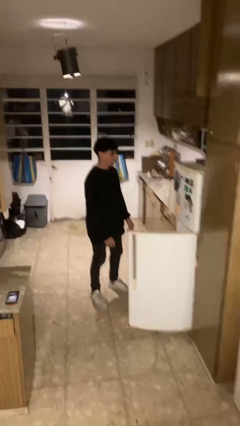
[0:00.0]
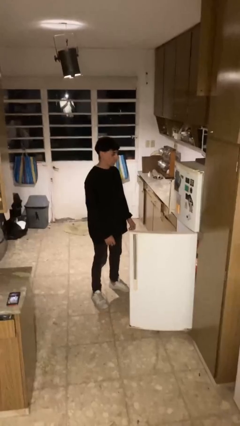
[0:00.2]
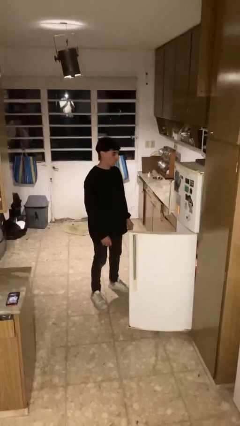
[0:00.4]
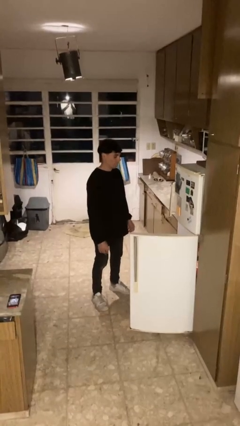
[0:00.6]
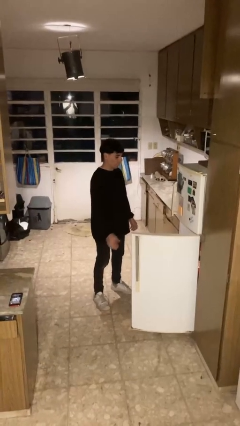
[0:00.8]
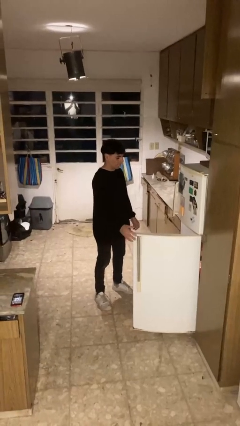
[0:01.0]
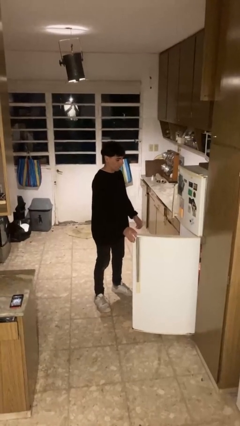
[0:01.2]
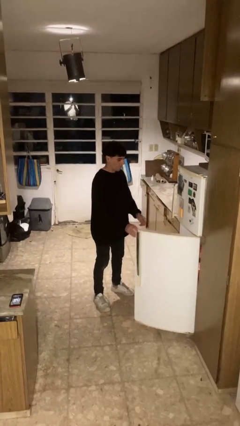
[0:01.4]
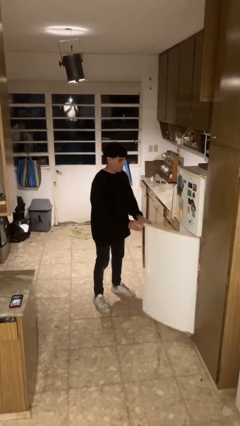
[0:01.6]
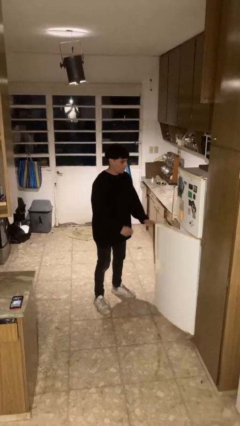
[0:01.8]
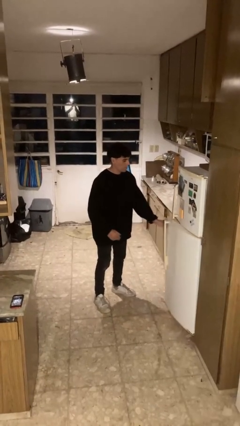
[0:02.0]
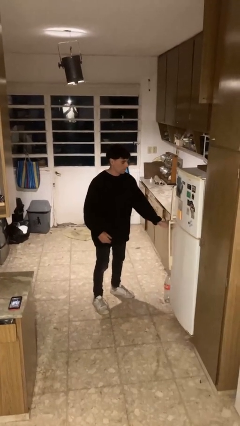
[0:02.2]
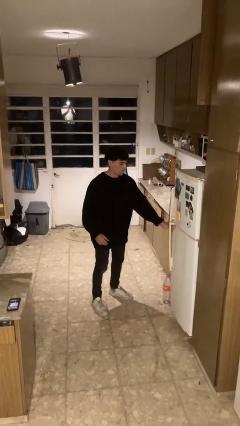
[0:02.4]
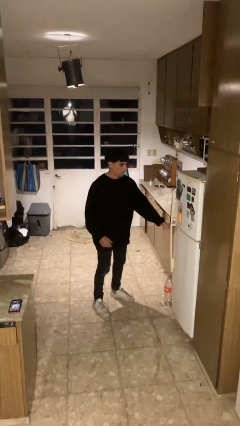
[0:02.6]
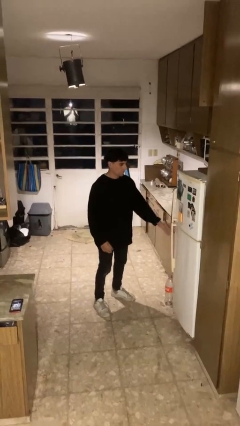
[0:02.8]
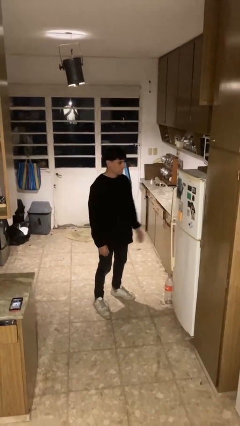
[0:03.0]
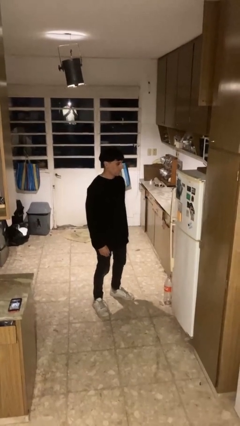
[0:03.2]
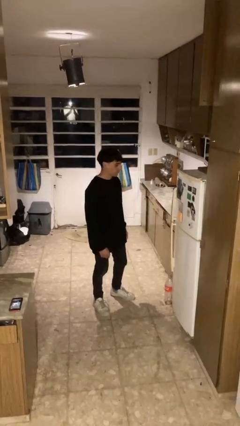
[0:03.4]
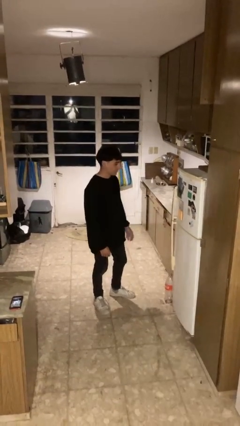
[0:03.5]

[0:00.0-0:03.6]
person closes refrigerator

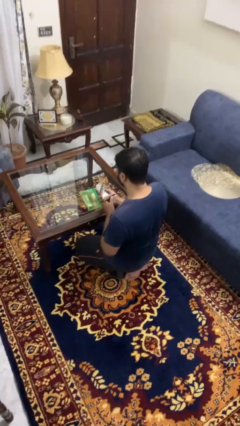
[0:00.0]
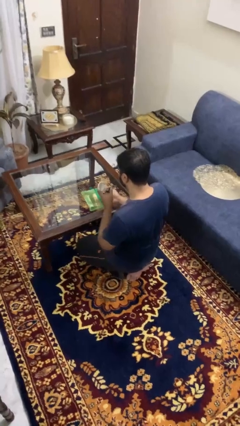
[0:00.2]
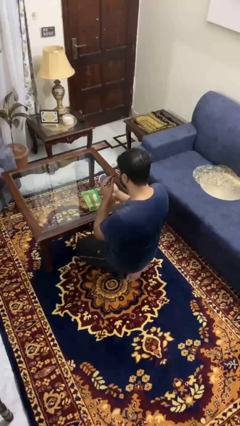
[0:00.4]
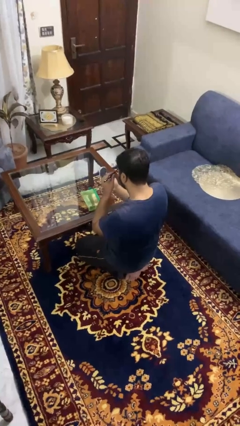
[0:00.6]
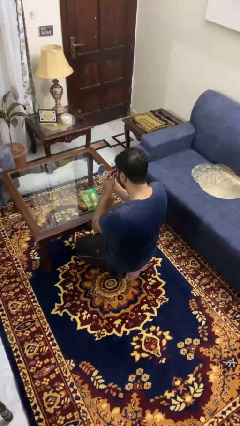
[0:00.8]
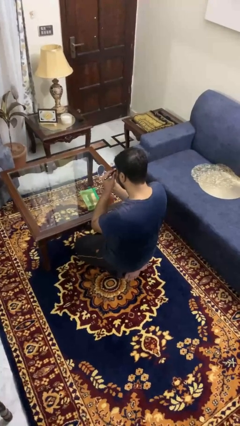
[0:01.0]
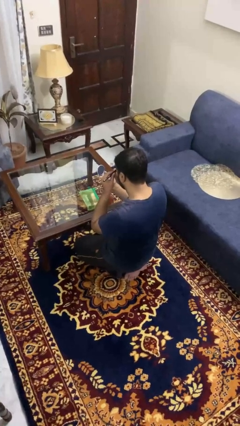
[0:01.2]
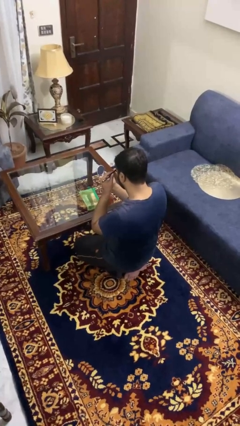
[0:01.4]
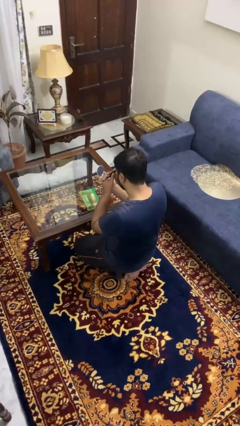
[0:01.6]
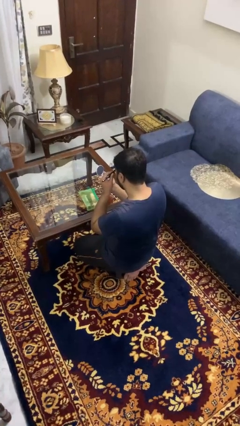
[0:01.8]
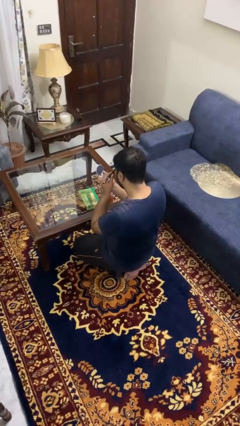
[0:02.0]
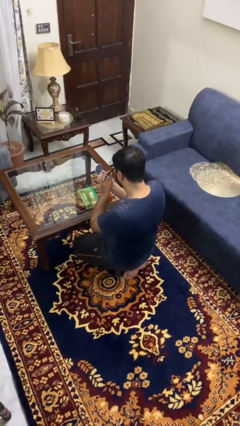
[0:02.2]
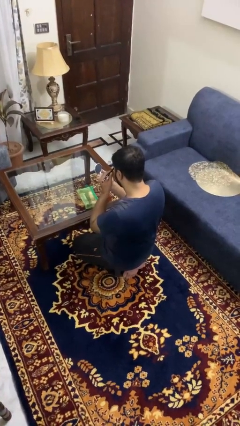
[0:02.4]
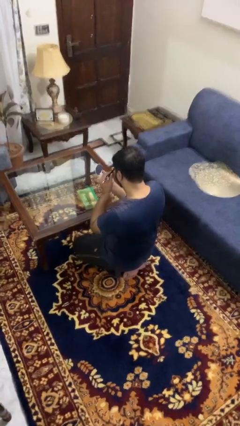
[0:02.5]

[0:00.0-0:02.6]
person applies eye makeup

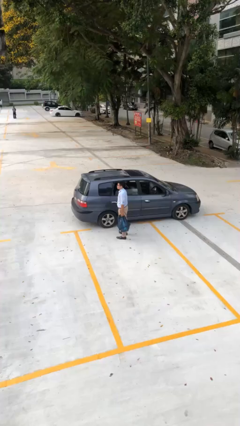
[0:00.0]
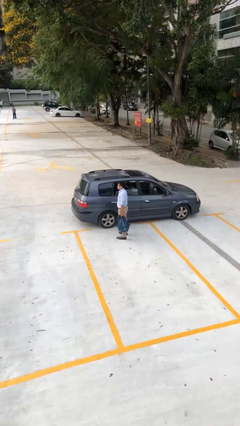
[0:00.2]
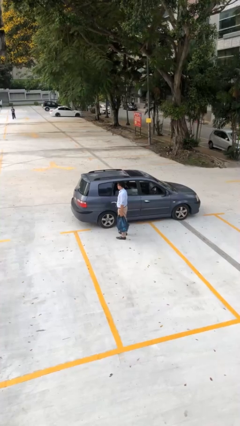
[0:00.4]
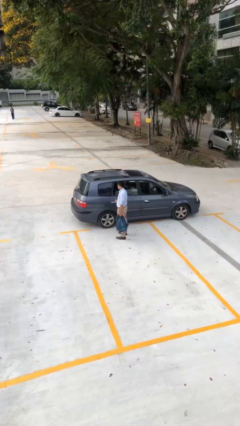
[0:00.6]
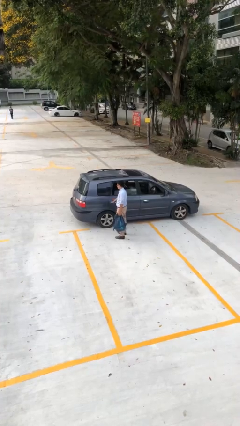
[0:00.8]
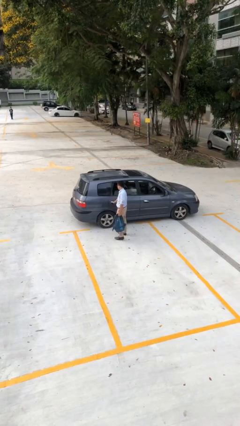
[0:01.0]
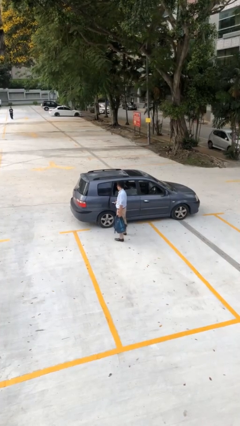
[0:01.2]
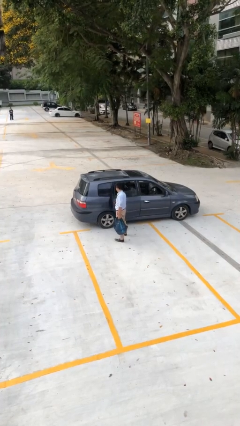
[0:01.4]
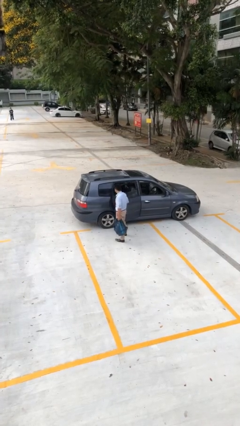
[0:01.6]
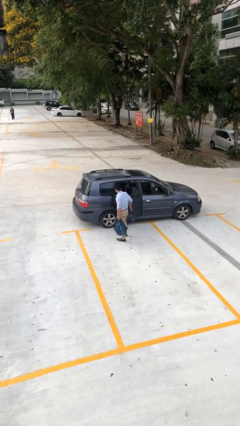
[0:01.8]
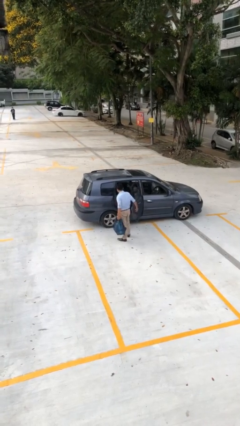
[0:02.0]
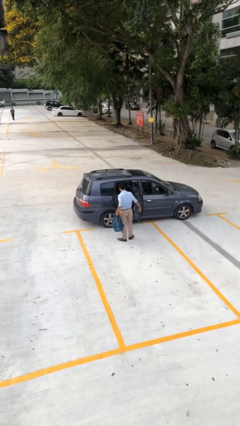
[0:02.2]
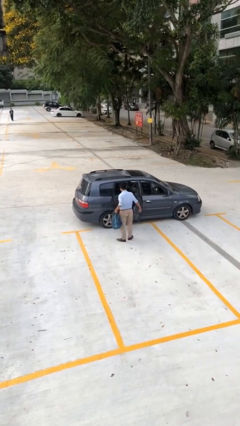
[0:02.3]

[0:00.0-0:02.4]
person opens car door

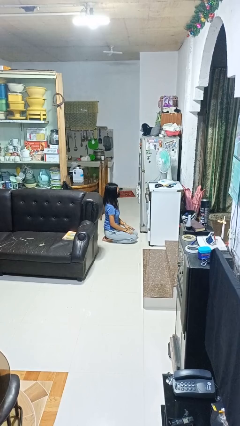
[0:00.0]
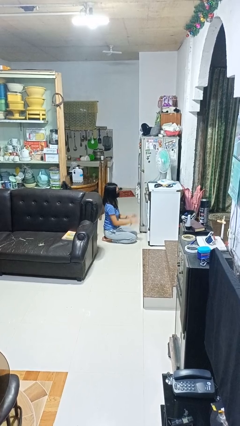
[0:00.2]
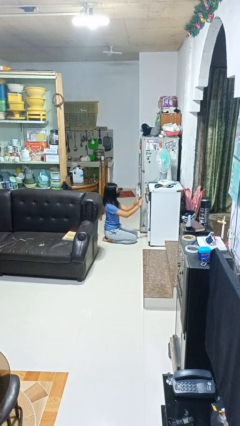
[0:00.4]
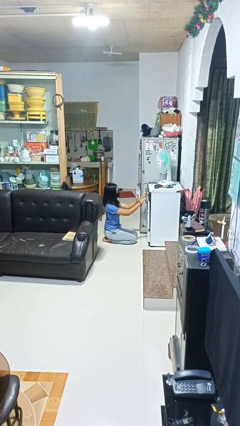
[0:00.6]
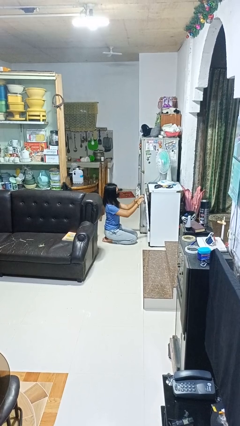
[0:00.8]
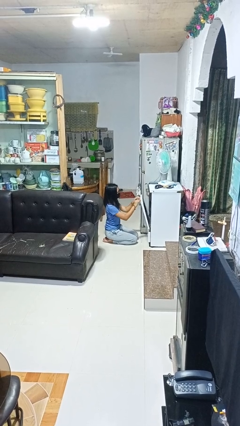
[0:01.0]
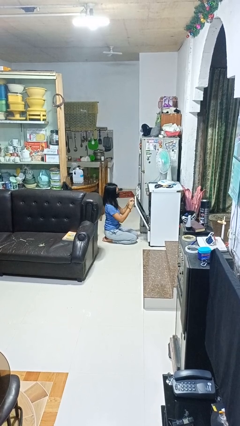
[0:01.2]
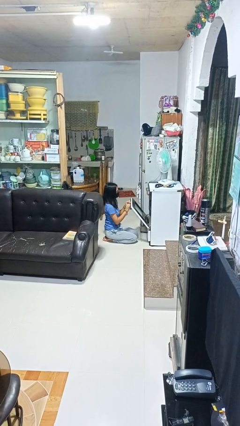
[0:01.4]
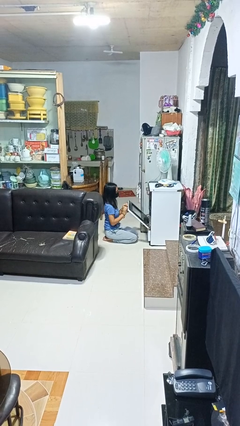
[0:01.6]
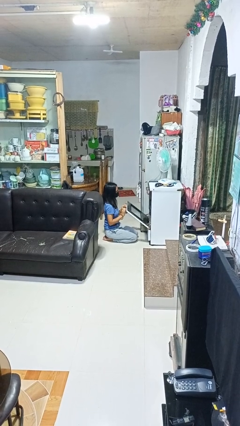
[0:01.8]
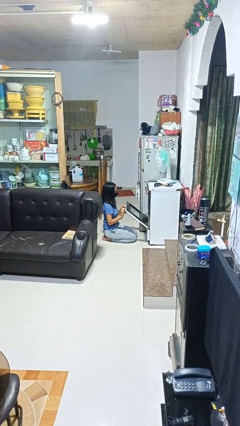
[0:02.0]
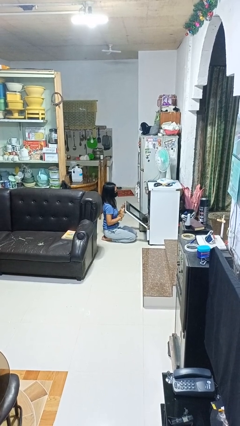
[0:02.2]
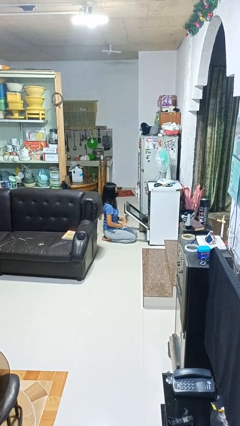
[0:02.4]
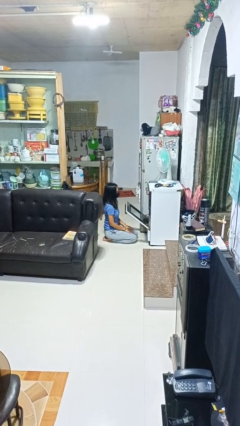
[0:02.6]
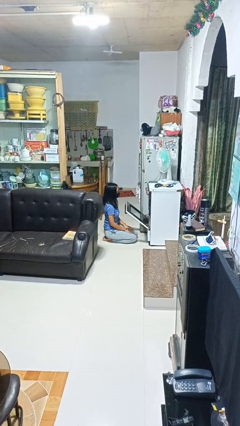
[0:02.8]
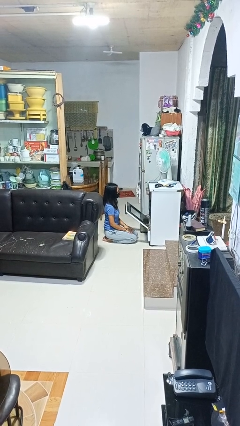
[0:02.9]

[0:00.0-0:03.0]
person opens oven door

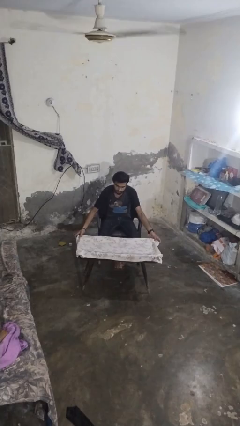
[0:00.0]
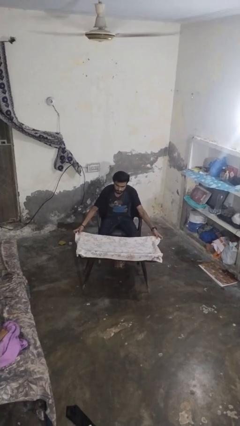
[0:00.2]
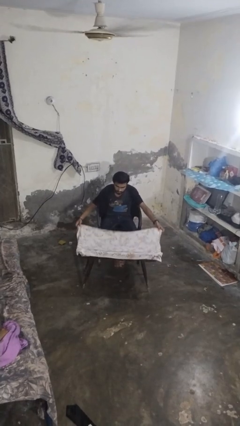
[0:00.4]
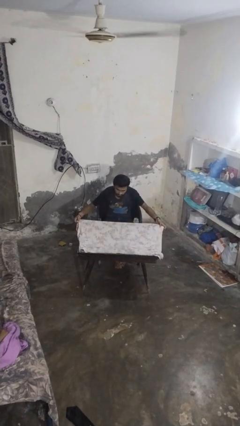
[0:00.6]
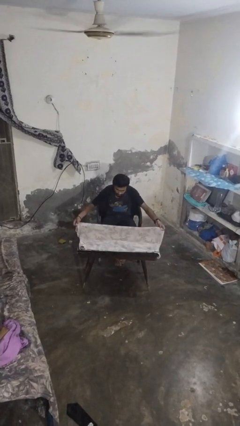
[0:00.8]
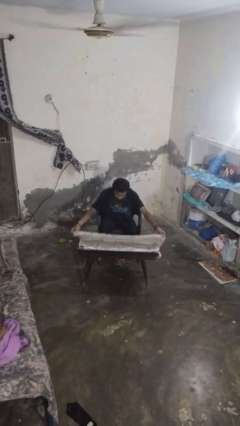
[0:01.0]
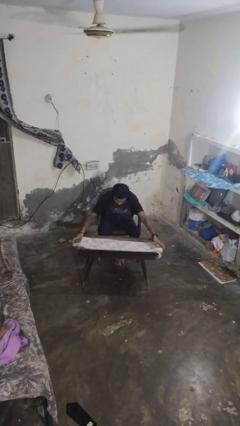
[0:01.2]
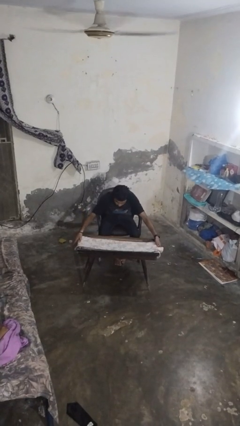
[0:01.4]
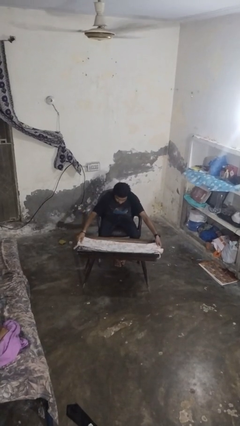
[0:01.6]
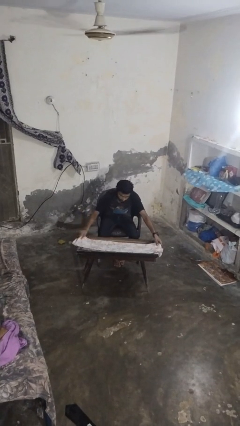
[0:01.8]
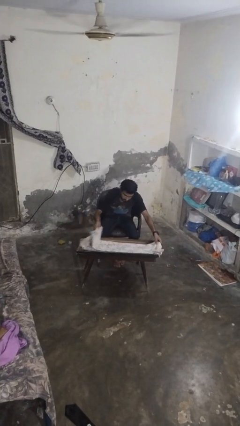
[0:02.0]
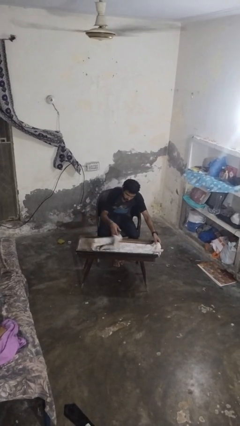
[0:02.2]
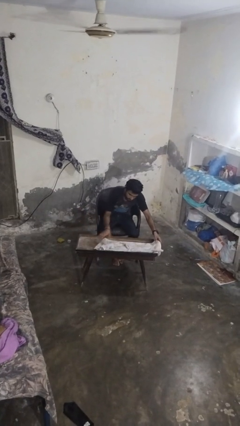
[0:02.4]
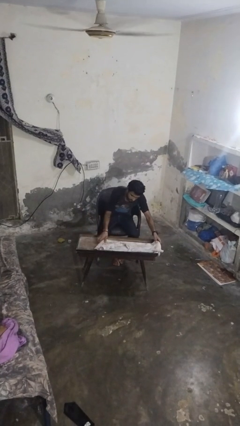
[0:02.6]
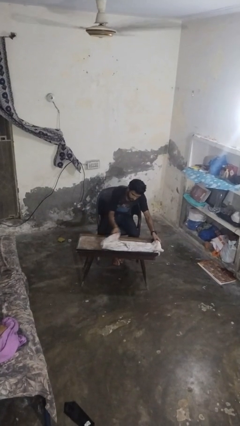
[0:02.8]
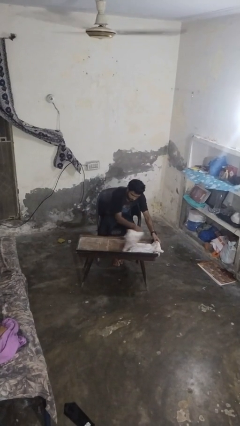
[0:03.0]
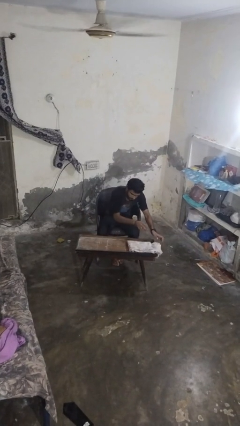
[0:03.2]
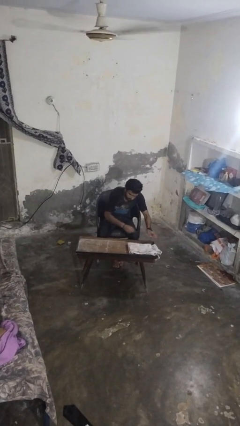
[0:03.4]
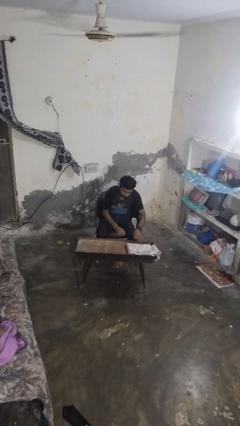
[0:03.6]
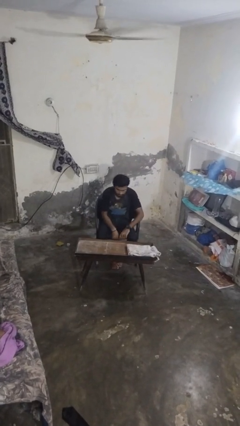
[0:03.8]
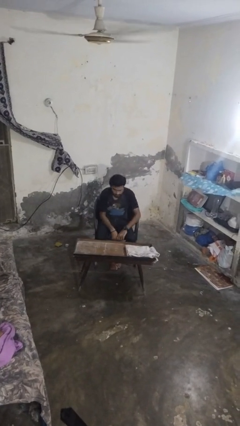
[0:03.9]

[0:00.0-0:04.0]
person folds tablecloth

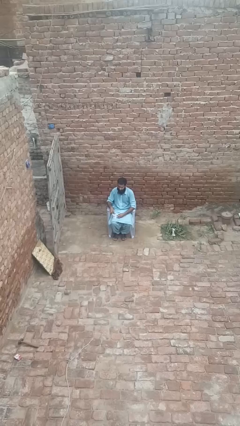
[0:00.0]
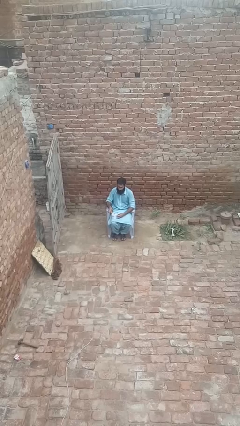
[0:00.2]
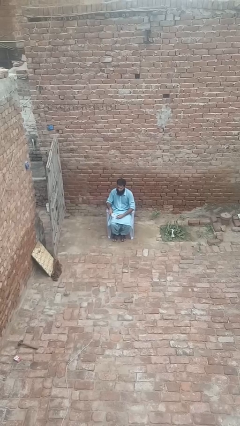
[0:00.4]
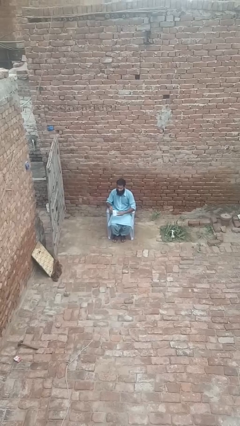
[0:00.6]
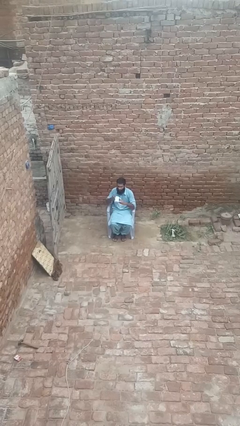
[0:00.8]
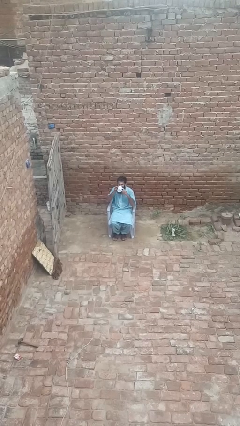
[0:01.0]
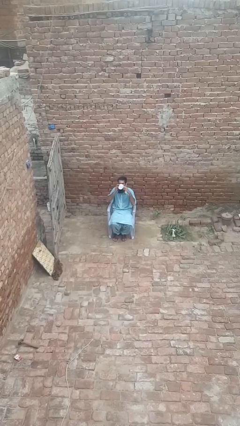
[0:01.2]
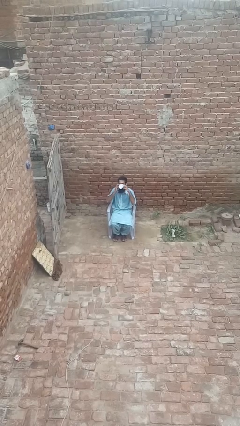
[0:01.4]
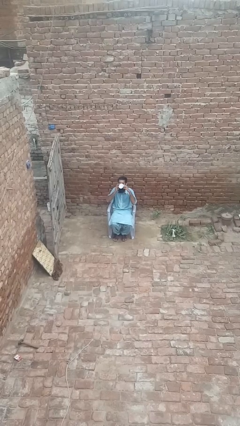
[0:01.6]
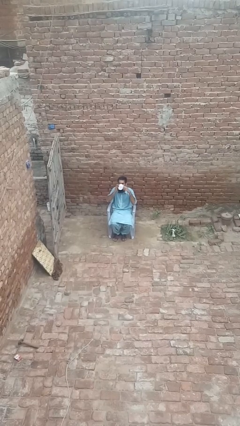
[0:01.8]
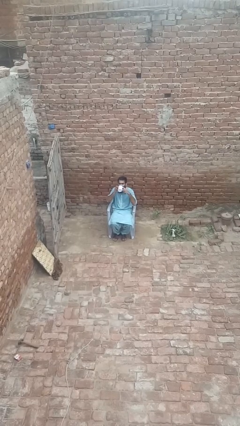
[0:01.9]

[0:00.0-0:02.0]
person drinks from mug
